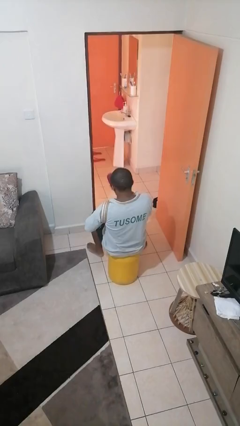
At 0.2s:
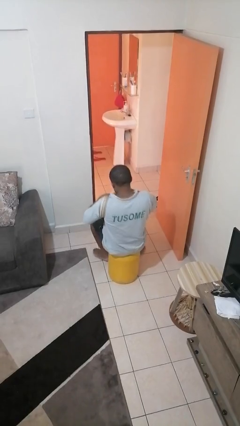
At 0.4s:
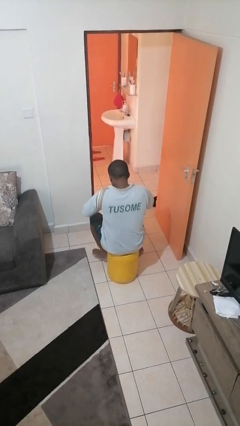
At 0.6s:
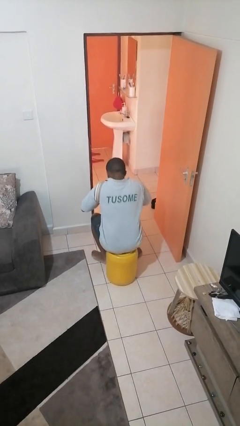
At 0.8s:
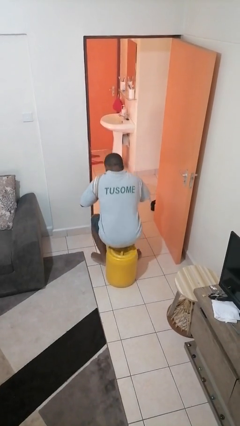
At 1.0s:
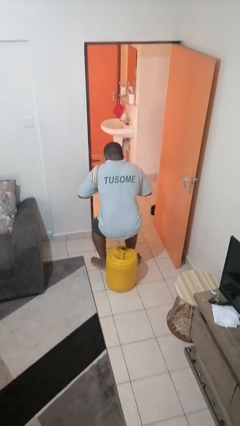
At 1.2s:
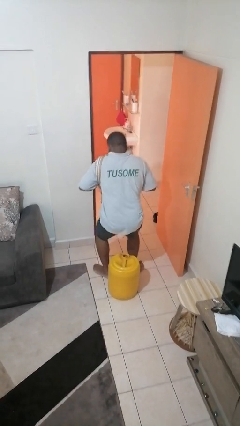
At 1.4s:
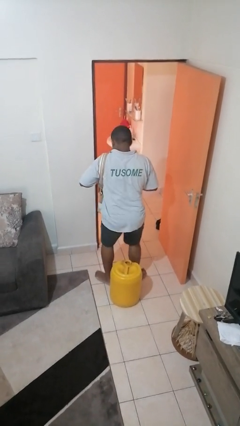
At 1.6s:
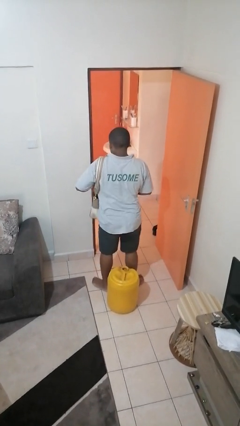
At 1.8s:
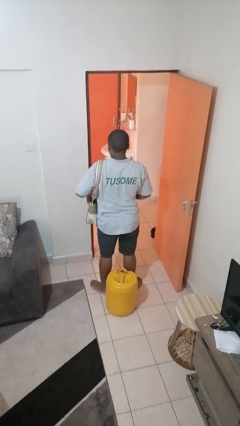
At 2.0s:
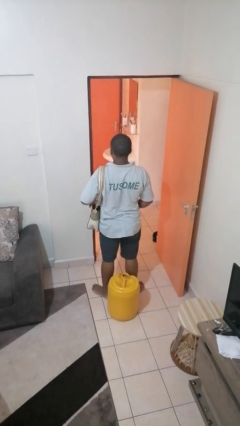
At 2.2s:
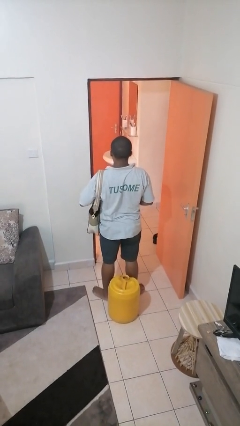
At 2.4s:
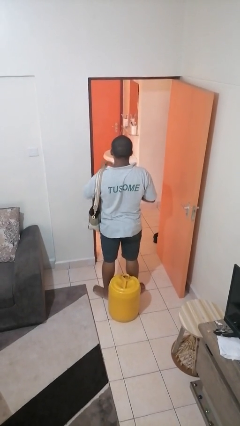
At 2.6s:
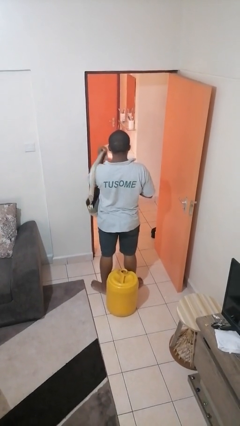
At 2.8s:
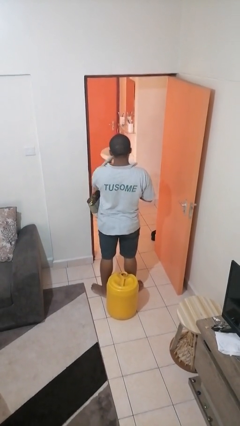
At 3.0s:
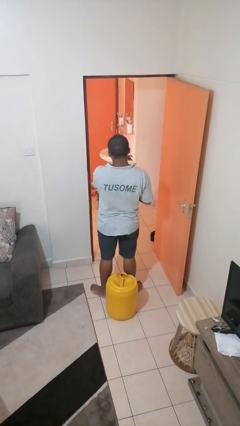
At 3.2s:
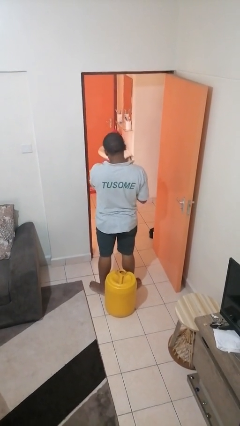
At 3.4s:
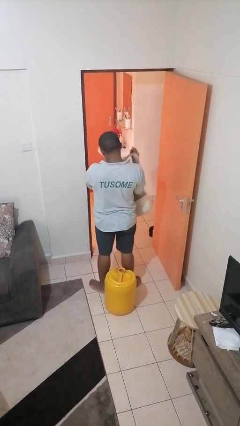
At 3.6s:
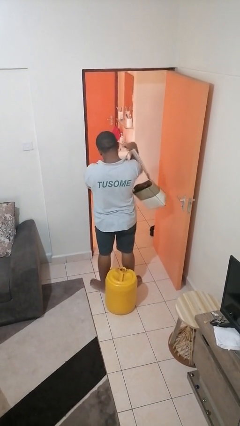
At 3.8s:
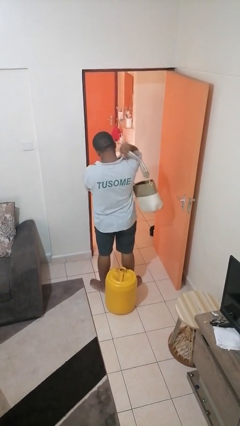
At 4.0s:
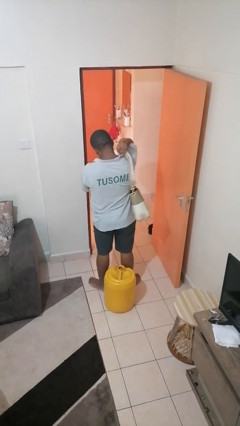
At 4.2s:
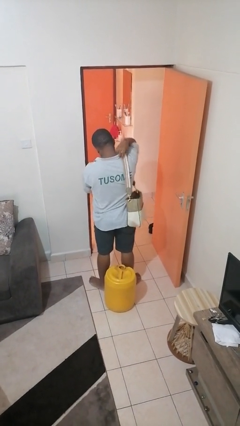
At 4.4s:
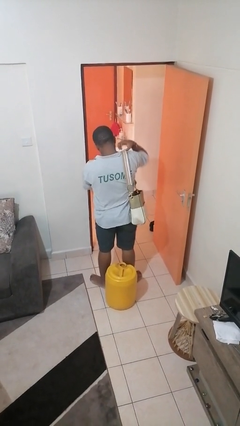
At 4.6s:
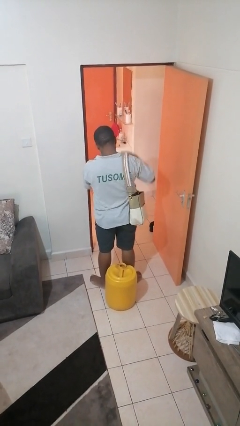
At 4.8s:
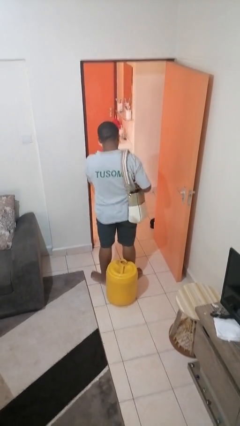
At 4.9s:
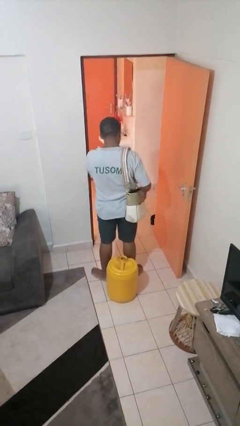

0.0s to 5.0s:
person puts object into purse

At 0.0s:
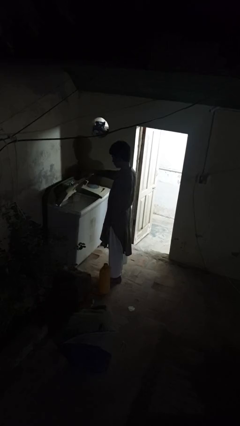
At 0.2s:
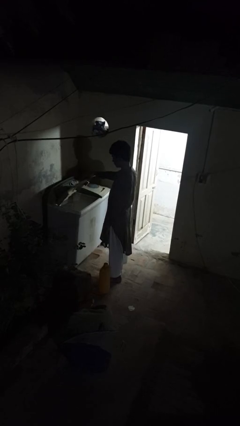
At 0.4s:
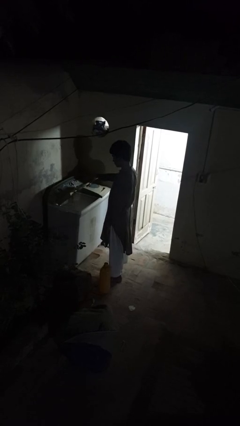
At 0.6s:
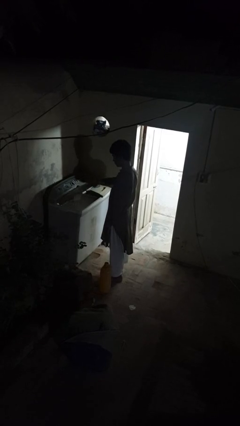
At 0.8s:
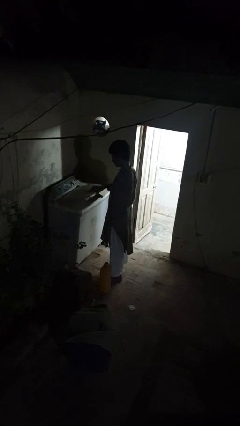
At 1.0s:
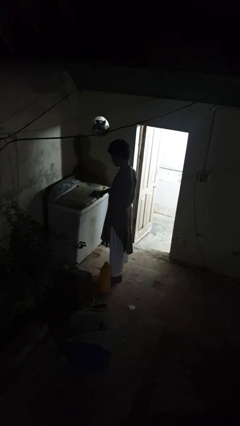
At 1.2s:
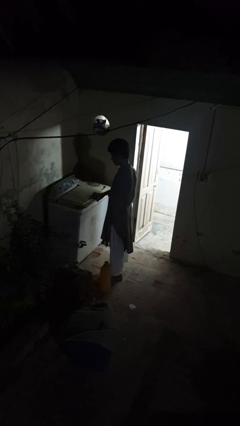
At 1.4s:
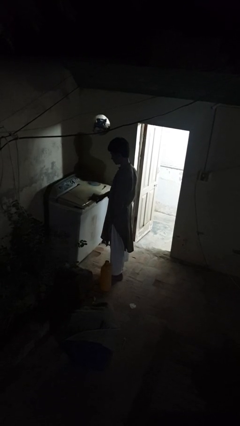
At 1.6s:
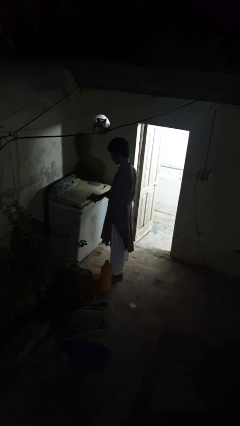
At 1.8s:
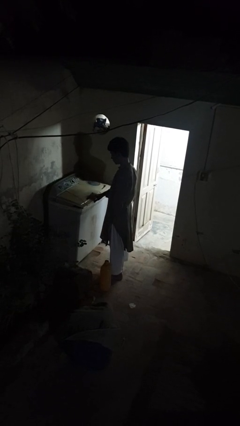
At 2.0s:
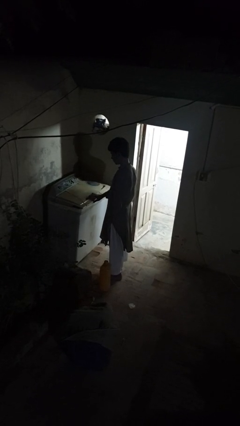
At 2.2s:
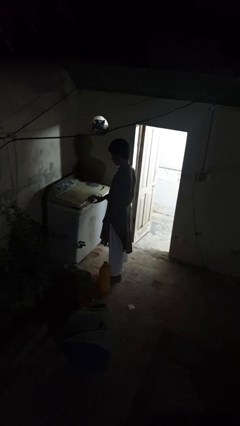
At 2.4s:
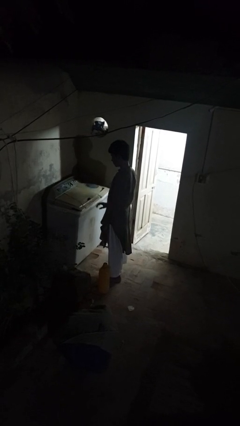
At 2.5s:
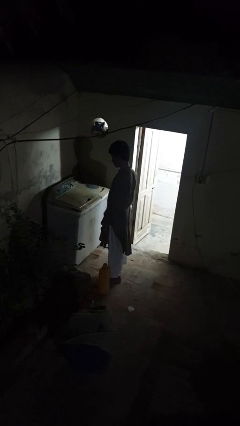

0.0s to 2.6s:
person closes clothes washer

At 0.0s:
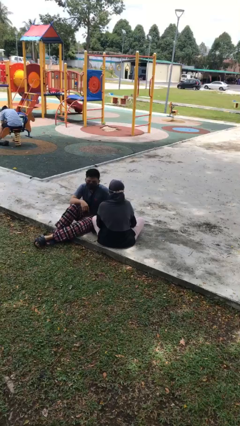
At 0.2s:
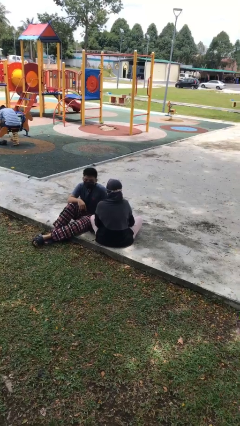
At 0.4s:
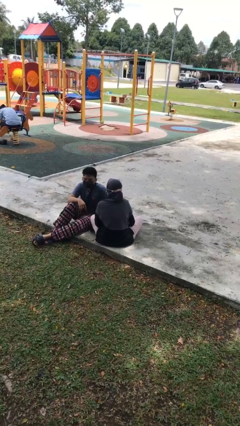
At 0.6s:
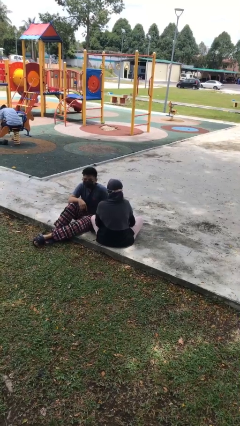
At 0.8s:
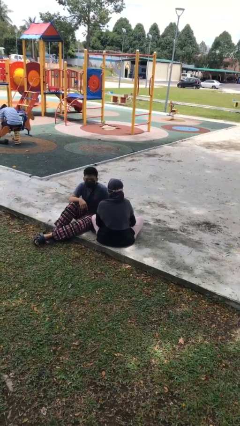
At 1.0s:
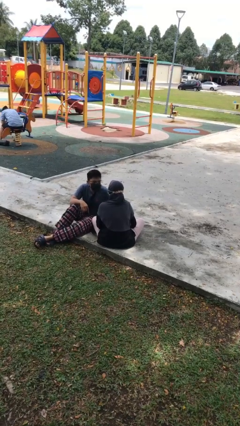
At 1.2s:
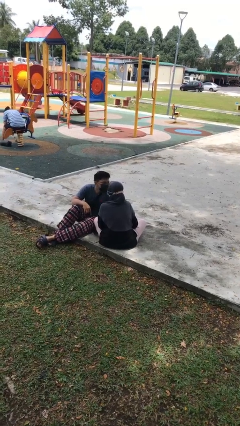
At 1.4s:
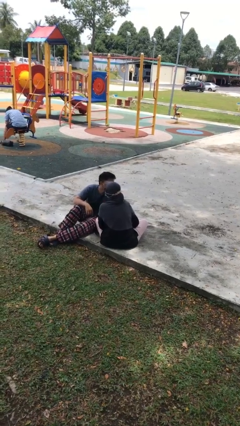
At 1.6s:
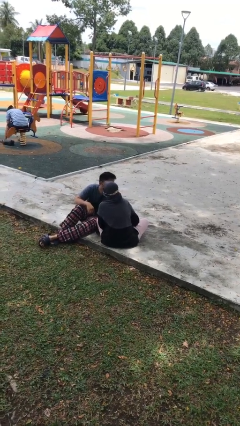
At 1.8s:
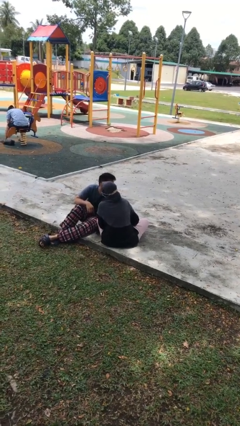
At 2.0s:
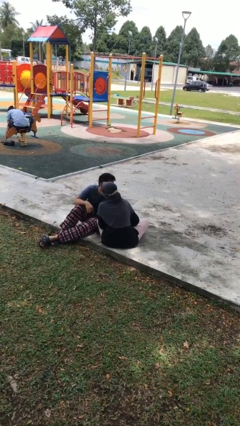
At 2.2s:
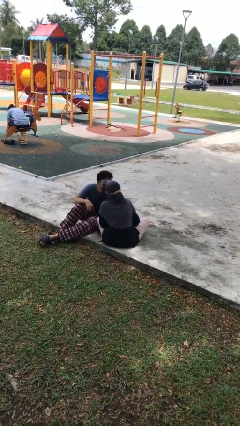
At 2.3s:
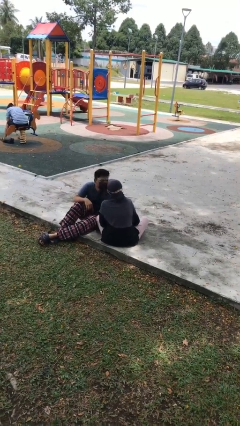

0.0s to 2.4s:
person kisses cheek of person

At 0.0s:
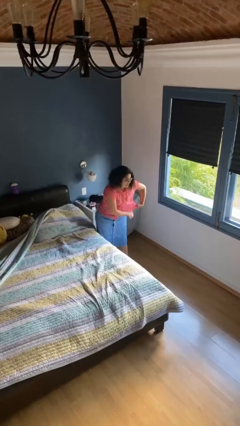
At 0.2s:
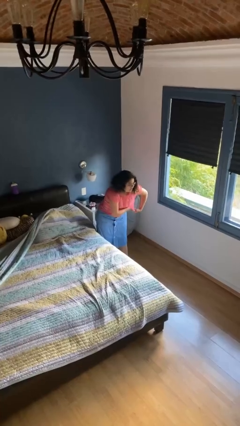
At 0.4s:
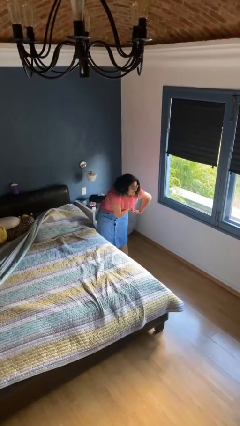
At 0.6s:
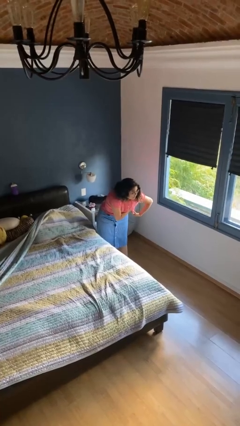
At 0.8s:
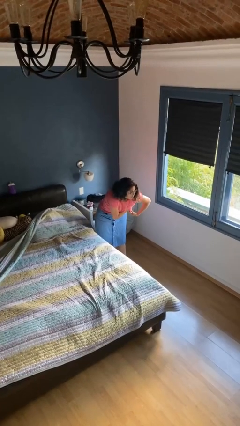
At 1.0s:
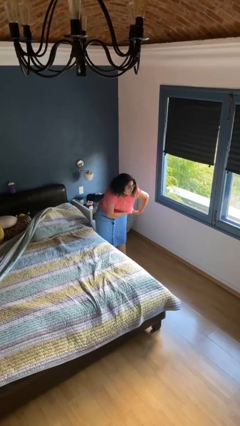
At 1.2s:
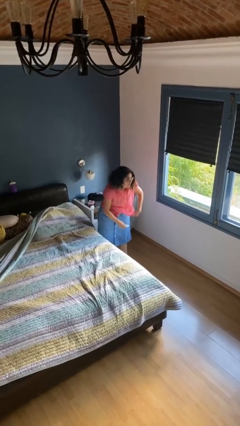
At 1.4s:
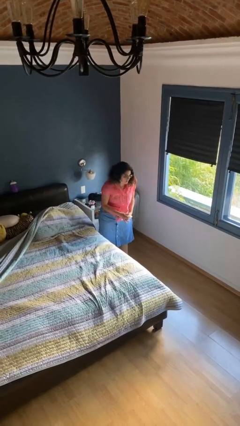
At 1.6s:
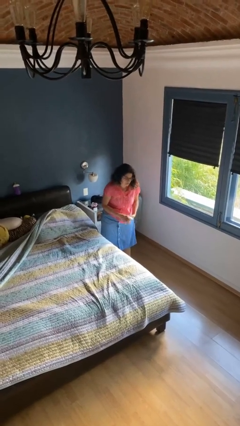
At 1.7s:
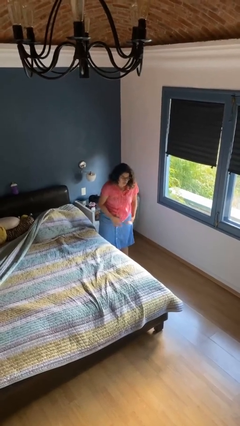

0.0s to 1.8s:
person applies deodorant

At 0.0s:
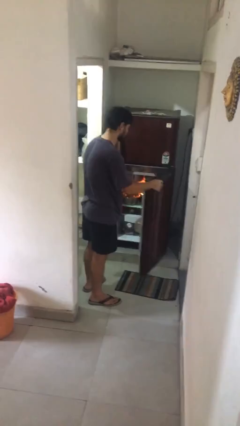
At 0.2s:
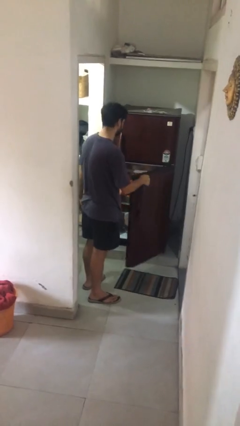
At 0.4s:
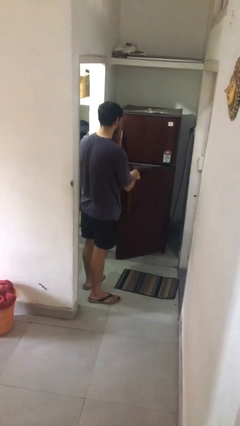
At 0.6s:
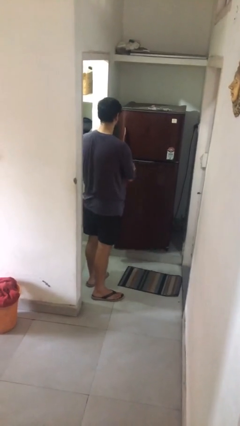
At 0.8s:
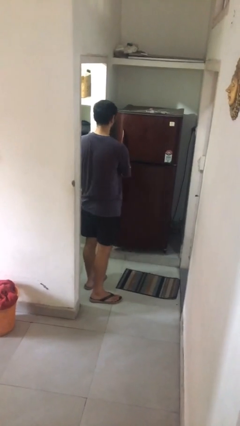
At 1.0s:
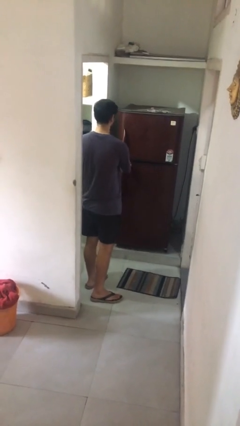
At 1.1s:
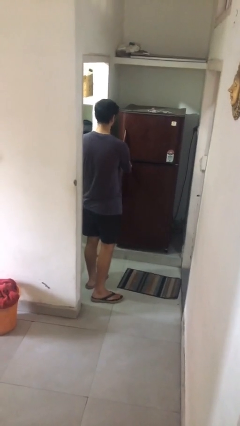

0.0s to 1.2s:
person closes refrigerator

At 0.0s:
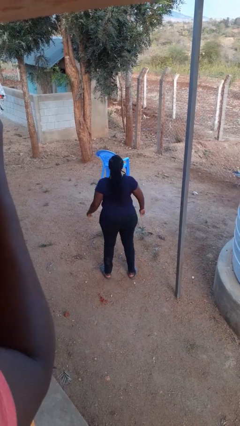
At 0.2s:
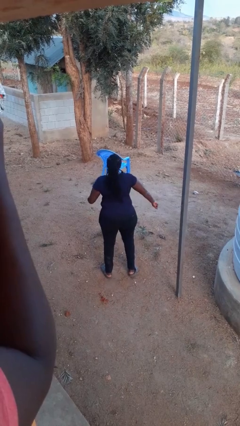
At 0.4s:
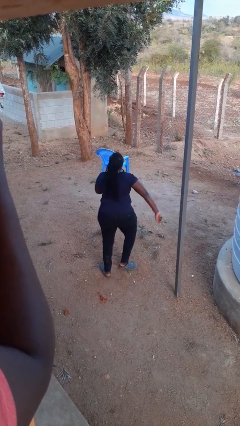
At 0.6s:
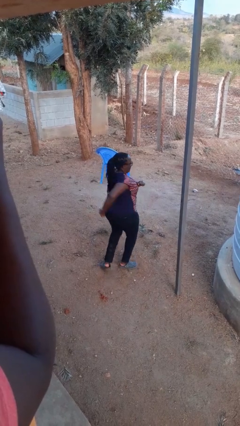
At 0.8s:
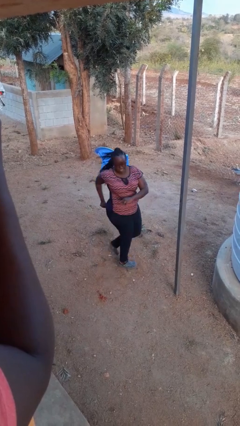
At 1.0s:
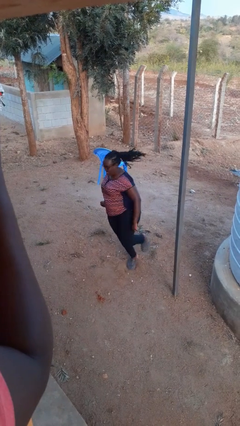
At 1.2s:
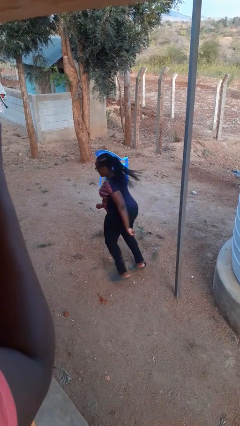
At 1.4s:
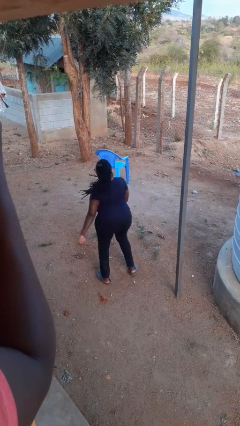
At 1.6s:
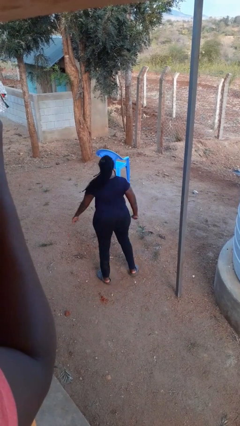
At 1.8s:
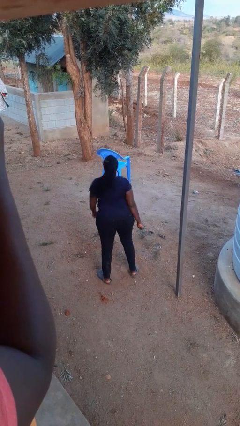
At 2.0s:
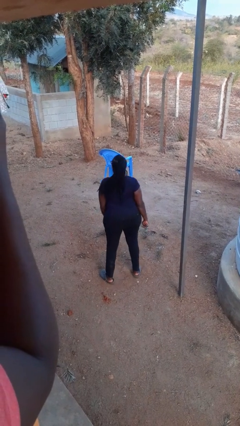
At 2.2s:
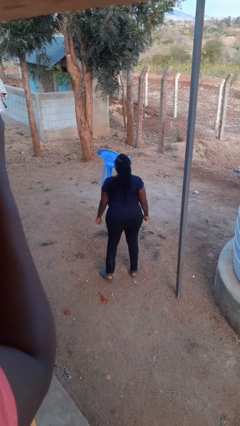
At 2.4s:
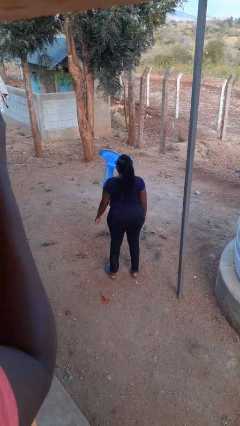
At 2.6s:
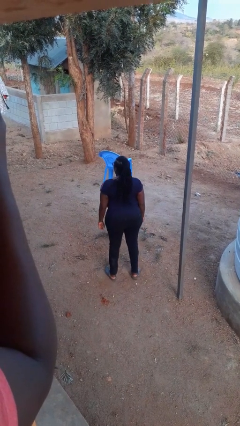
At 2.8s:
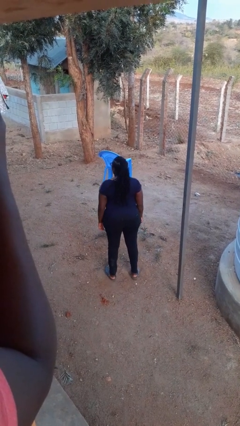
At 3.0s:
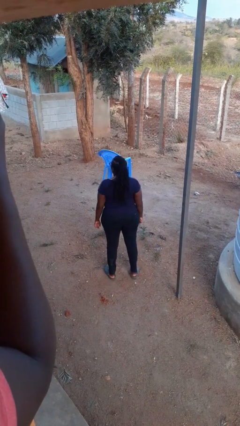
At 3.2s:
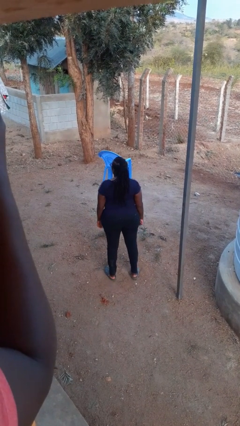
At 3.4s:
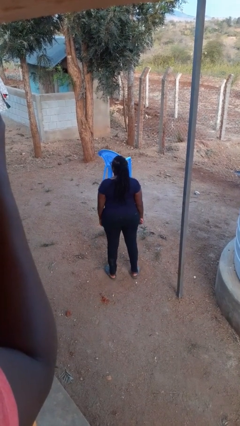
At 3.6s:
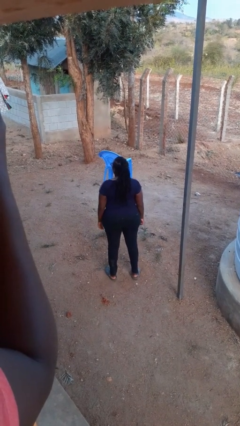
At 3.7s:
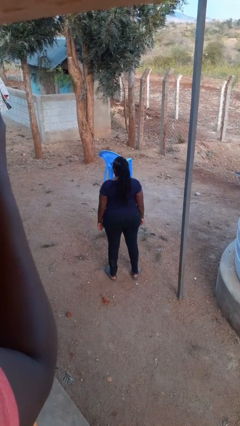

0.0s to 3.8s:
person twirls

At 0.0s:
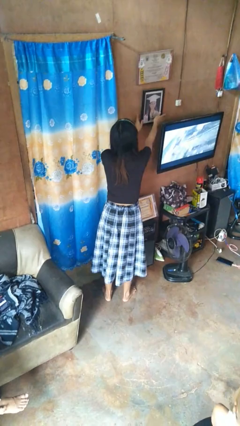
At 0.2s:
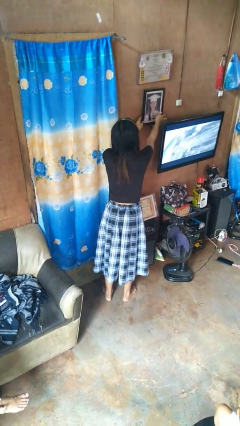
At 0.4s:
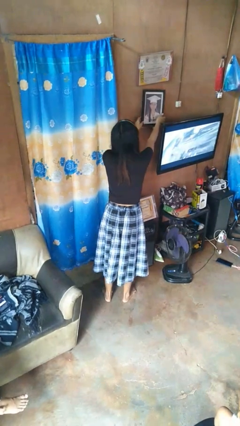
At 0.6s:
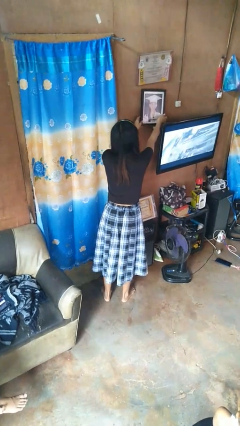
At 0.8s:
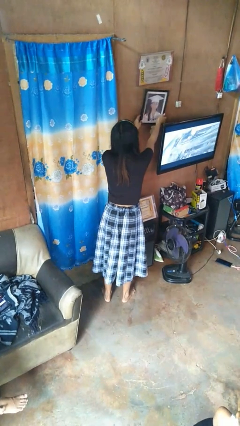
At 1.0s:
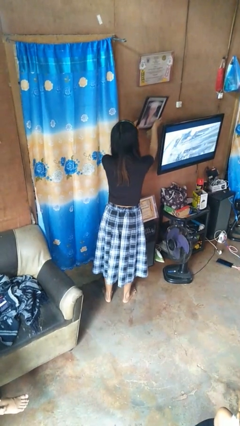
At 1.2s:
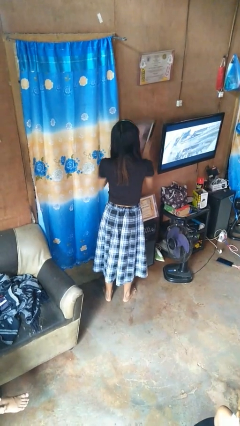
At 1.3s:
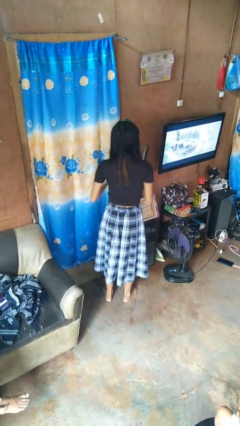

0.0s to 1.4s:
person takes down picture frame
